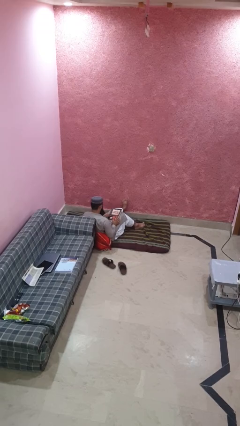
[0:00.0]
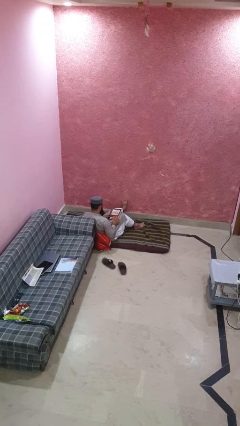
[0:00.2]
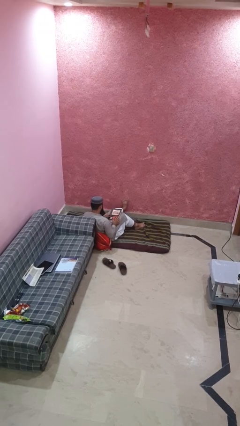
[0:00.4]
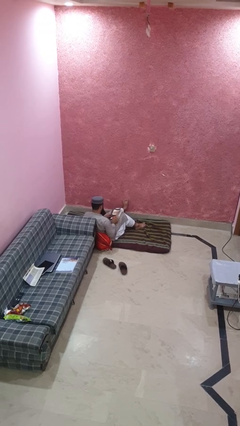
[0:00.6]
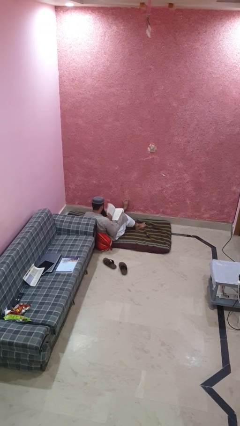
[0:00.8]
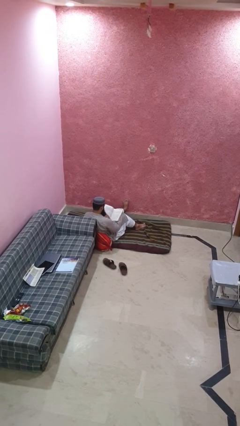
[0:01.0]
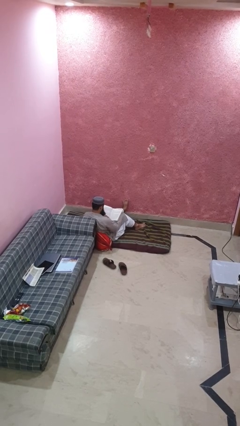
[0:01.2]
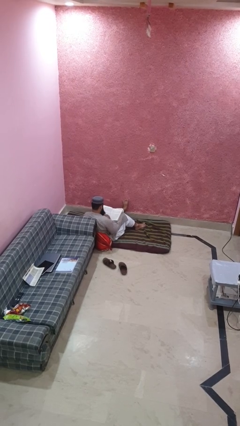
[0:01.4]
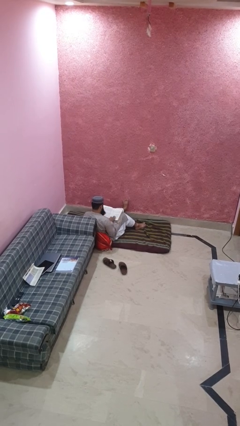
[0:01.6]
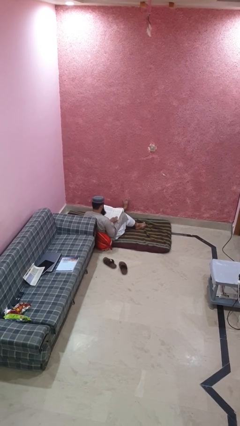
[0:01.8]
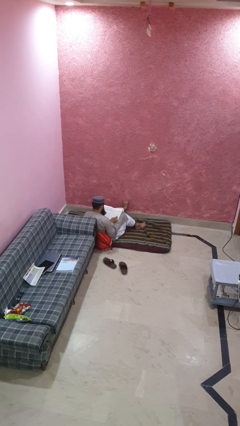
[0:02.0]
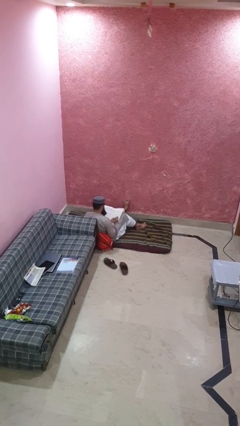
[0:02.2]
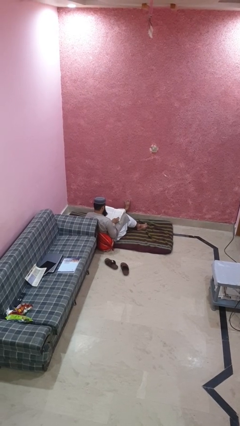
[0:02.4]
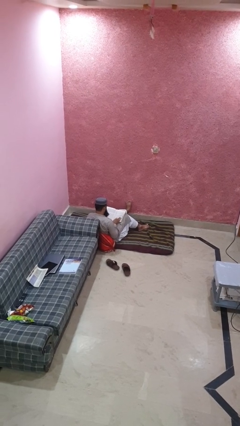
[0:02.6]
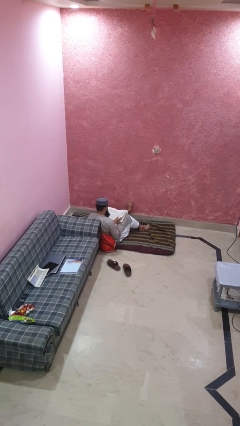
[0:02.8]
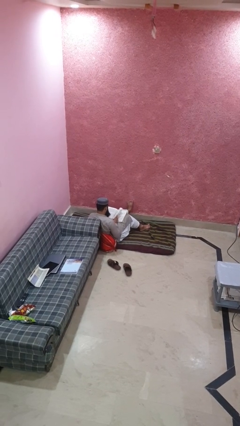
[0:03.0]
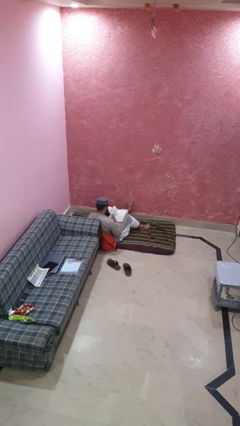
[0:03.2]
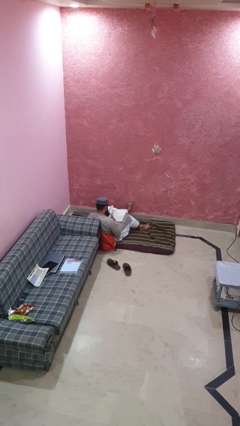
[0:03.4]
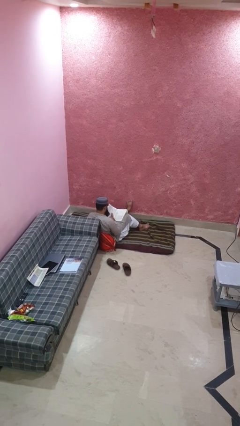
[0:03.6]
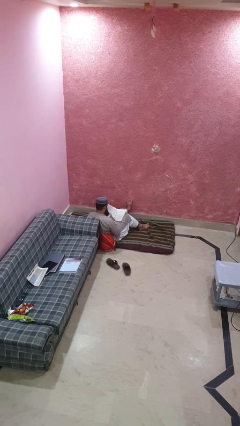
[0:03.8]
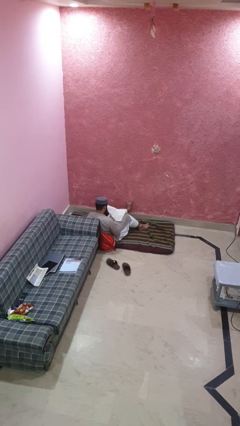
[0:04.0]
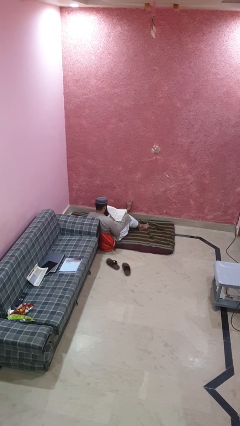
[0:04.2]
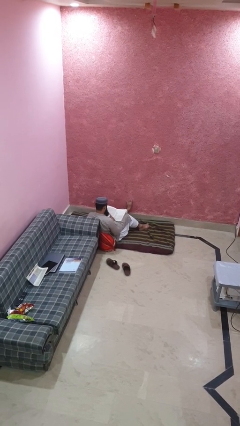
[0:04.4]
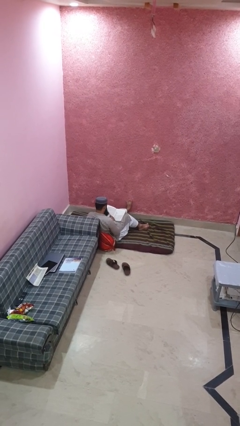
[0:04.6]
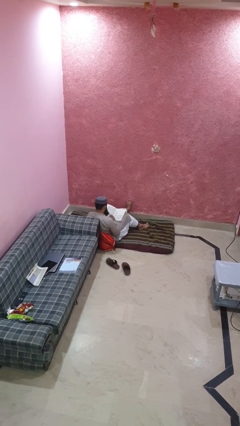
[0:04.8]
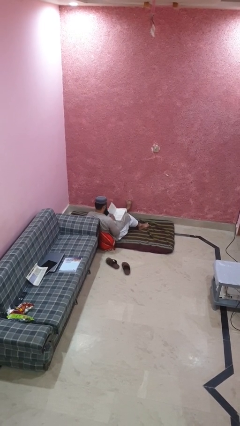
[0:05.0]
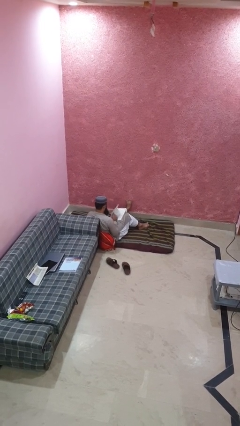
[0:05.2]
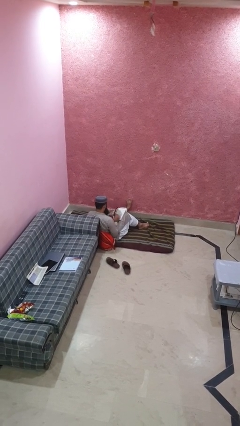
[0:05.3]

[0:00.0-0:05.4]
person reads book

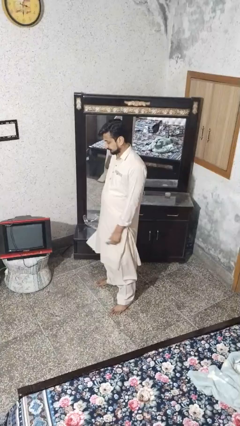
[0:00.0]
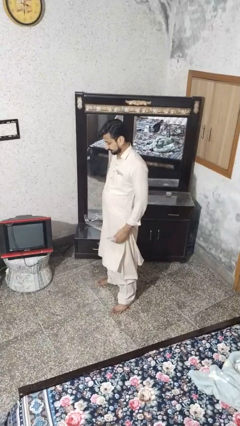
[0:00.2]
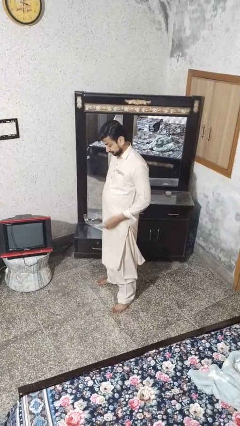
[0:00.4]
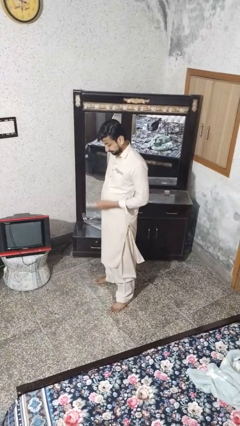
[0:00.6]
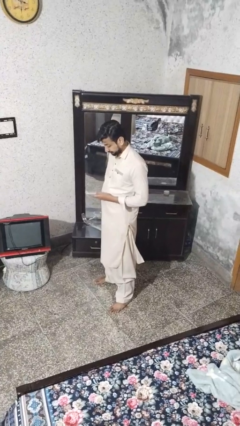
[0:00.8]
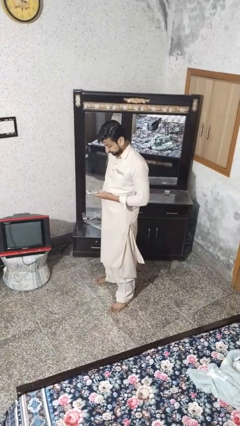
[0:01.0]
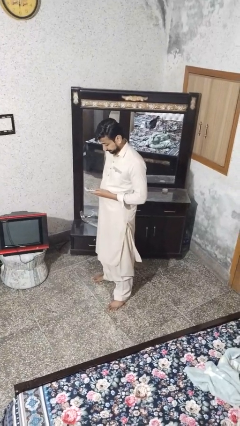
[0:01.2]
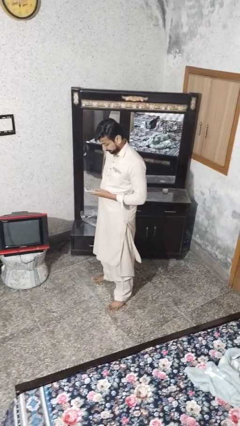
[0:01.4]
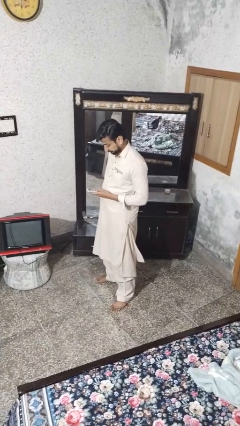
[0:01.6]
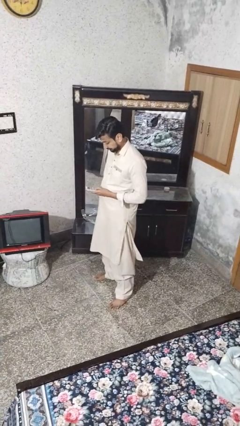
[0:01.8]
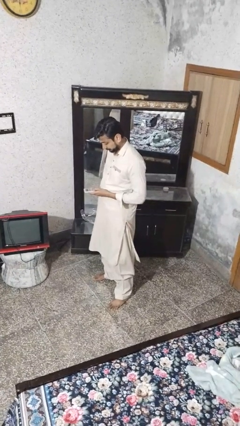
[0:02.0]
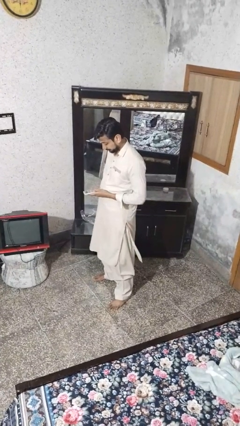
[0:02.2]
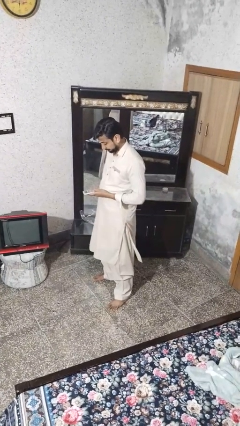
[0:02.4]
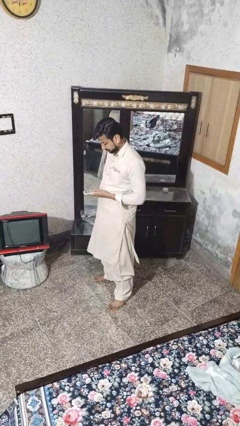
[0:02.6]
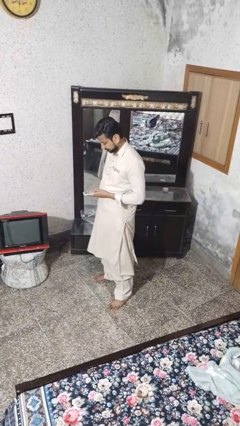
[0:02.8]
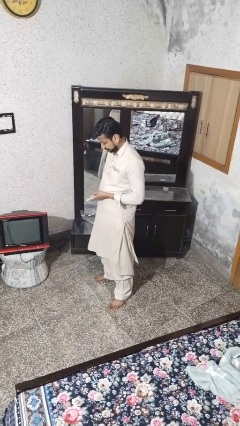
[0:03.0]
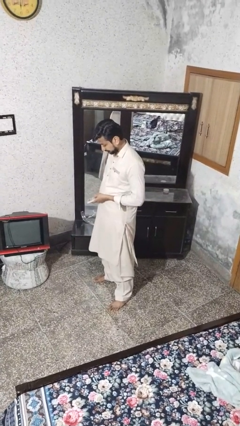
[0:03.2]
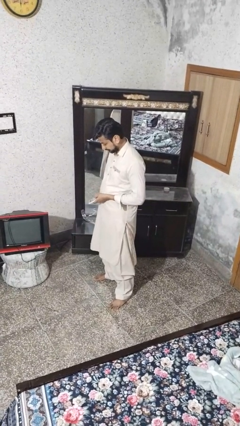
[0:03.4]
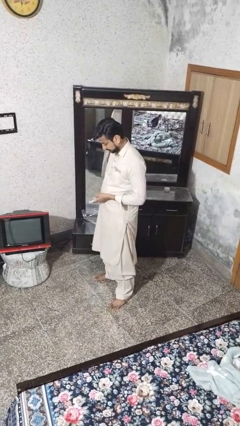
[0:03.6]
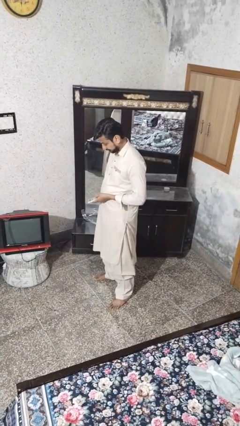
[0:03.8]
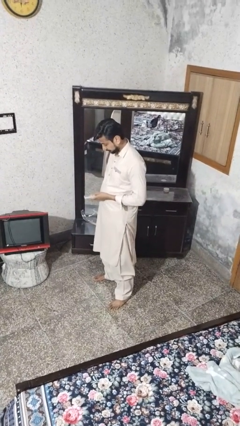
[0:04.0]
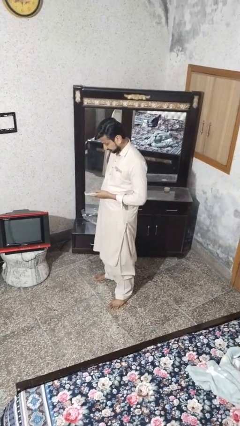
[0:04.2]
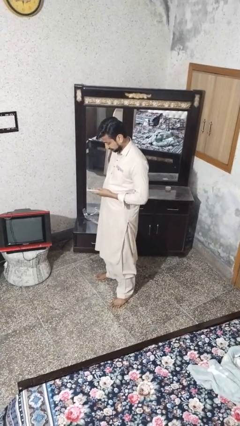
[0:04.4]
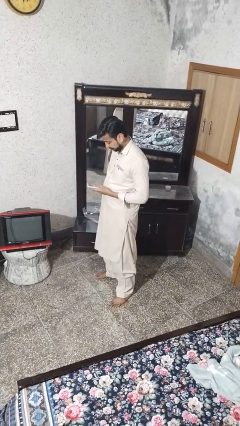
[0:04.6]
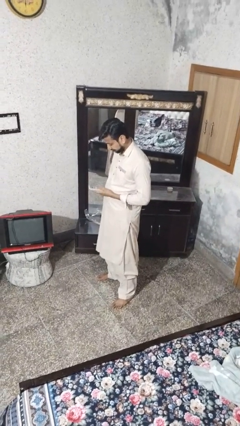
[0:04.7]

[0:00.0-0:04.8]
person uses television remote

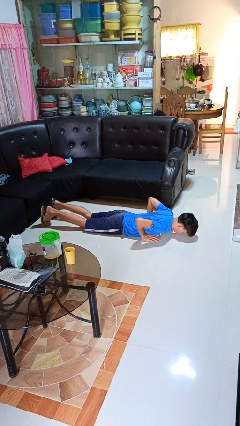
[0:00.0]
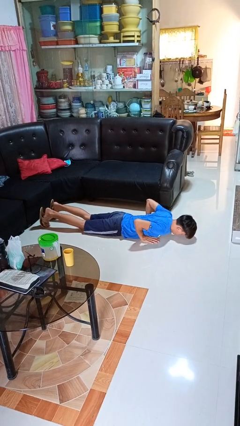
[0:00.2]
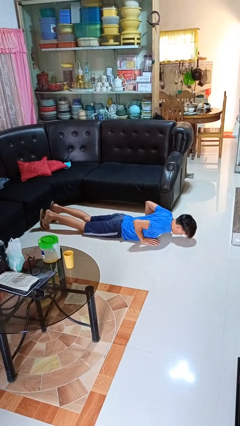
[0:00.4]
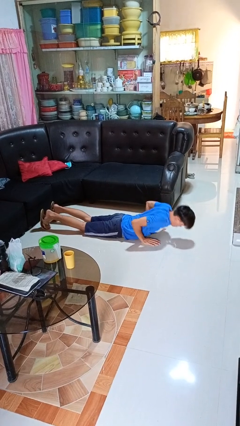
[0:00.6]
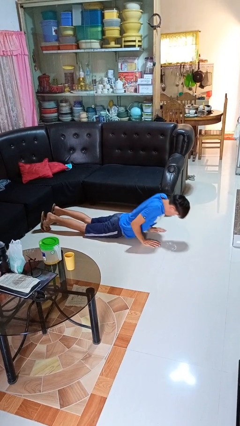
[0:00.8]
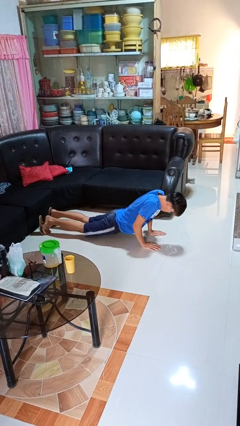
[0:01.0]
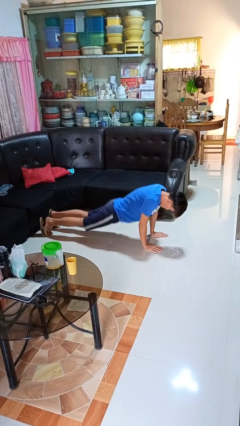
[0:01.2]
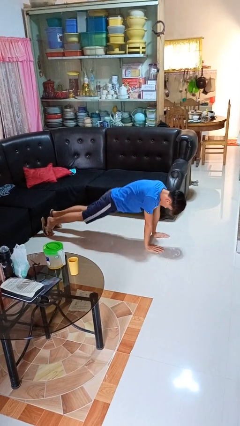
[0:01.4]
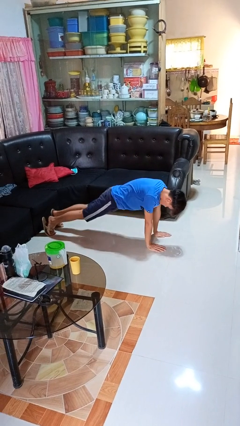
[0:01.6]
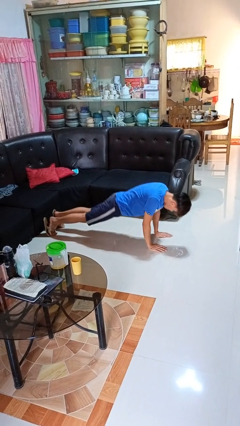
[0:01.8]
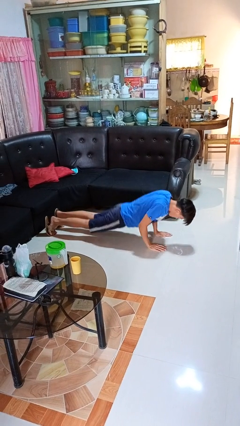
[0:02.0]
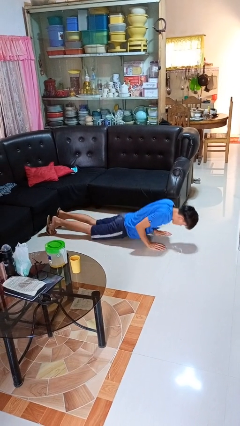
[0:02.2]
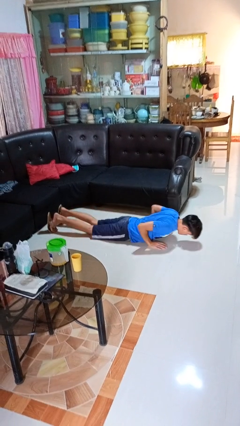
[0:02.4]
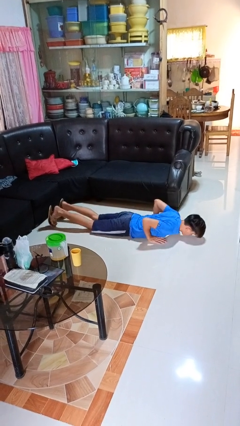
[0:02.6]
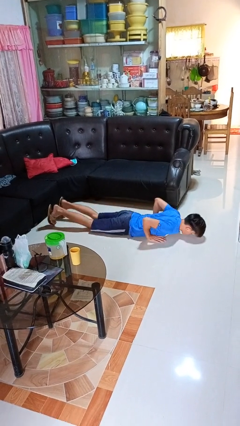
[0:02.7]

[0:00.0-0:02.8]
person exercises with pushup

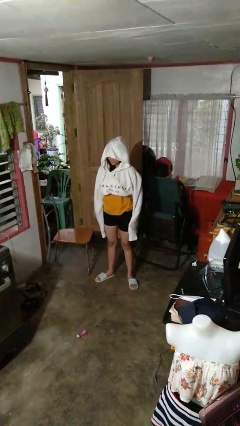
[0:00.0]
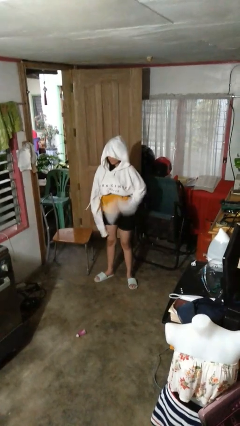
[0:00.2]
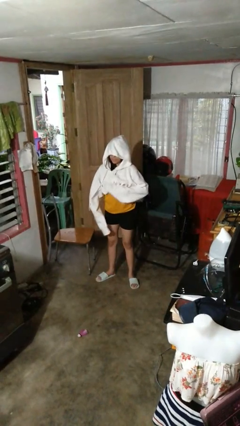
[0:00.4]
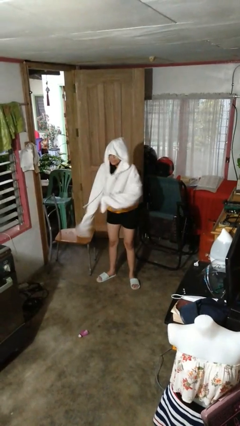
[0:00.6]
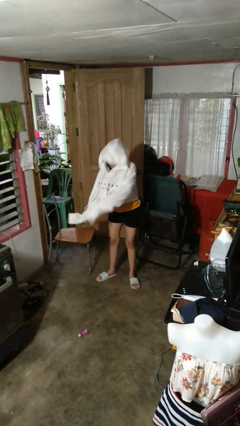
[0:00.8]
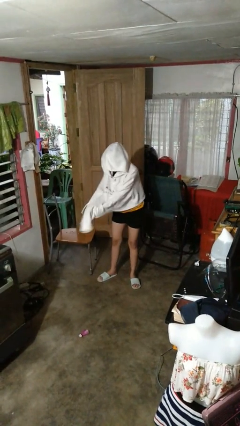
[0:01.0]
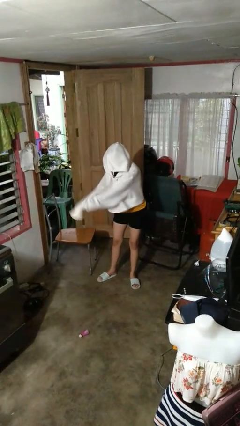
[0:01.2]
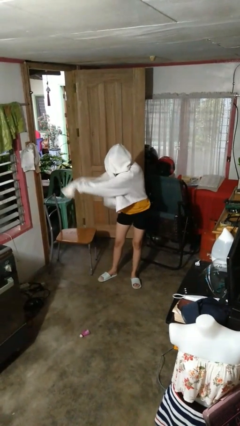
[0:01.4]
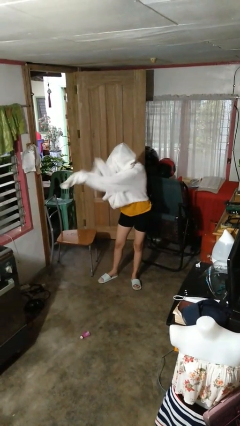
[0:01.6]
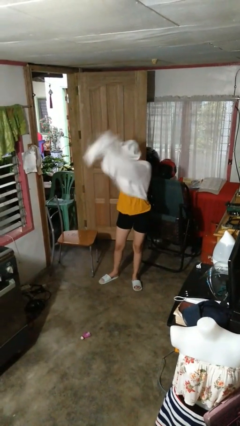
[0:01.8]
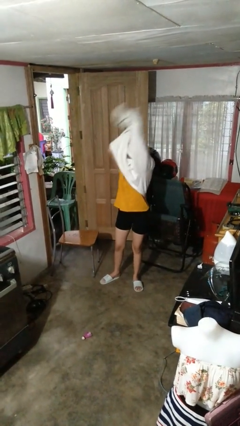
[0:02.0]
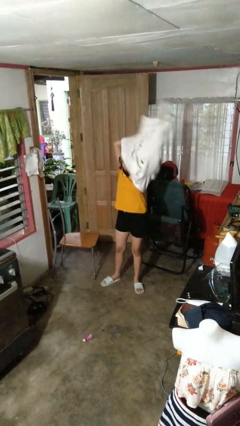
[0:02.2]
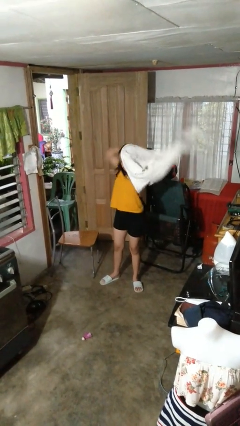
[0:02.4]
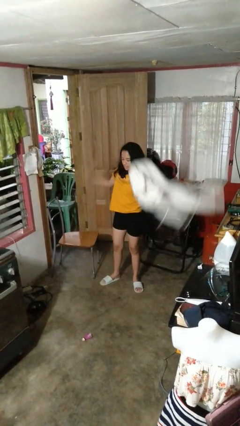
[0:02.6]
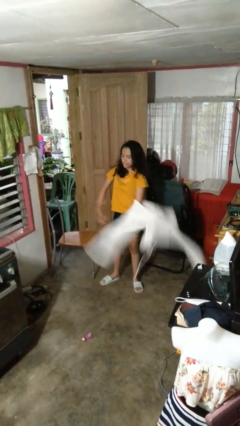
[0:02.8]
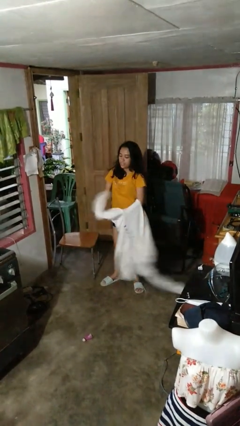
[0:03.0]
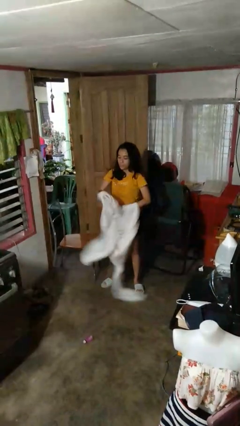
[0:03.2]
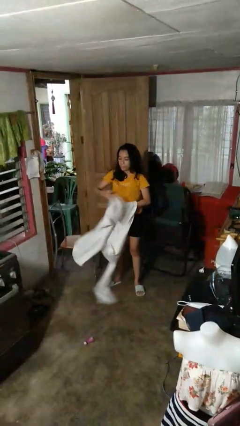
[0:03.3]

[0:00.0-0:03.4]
person takes off hoodie

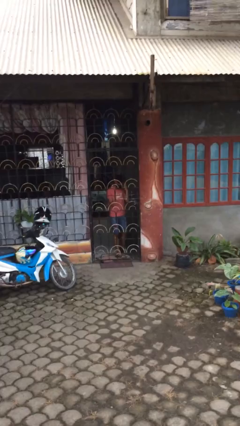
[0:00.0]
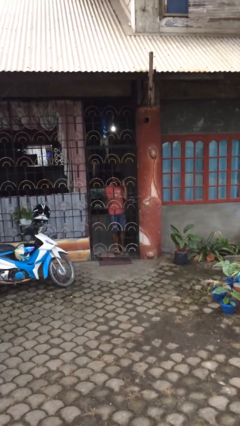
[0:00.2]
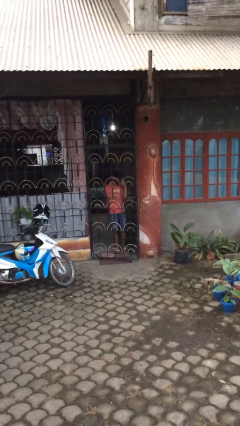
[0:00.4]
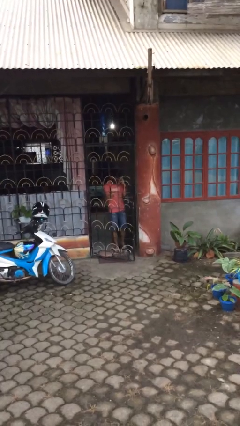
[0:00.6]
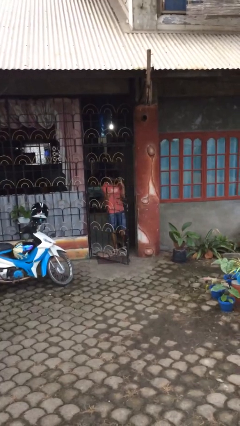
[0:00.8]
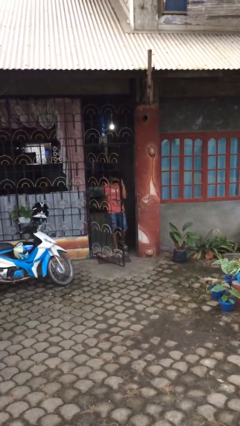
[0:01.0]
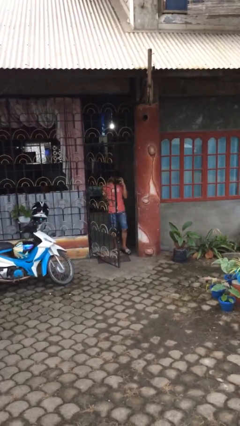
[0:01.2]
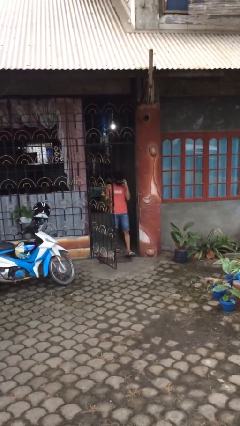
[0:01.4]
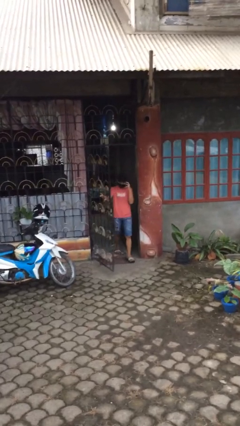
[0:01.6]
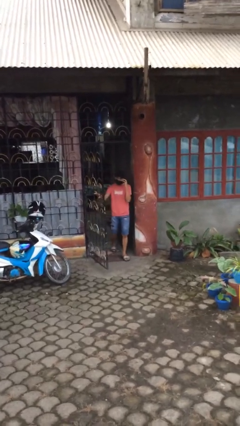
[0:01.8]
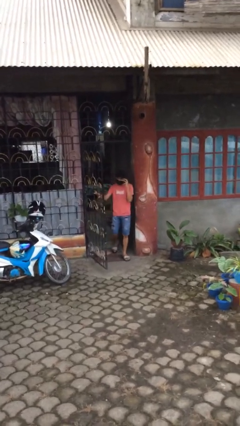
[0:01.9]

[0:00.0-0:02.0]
person opens facility door
